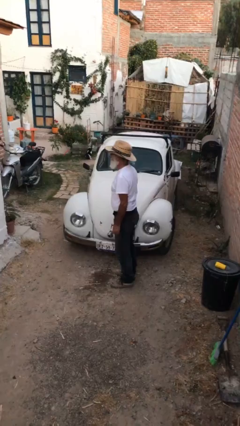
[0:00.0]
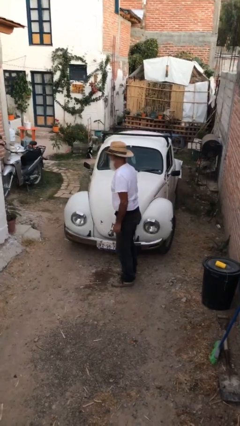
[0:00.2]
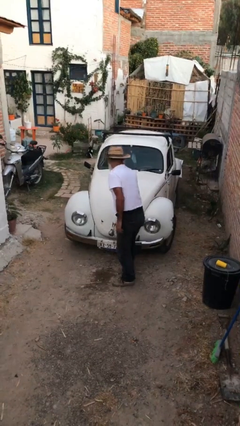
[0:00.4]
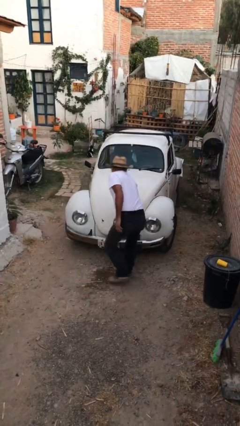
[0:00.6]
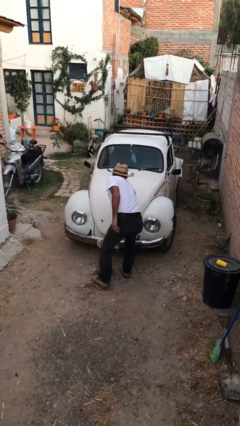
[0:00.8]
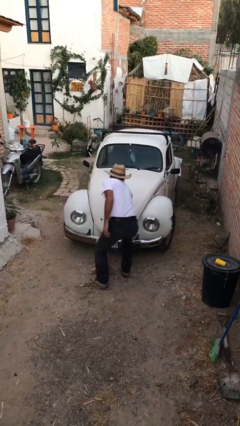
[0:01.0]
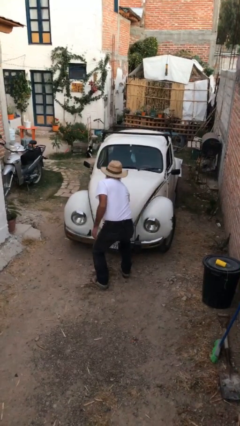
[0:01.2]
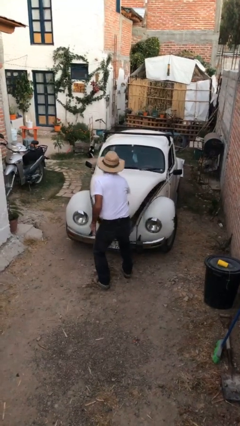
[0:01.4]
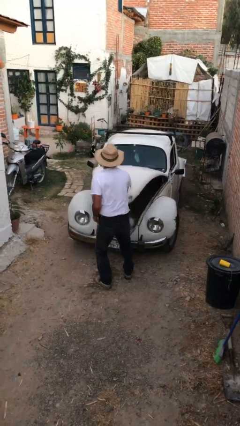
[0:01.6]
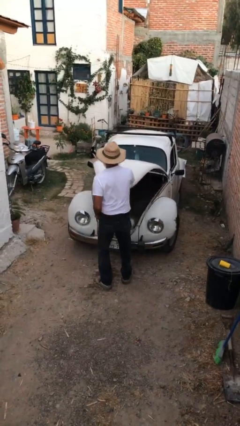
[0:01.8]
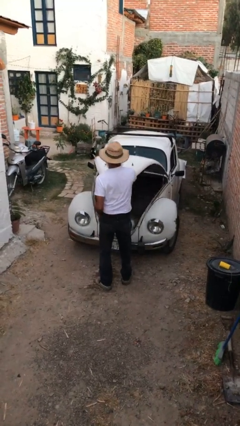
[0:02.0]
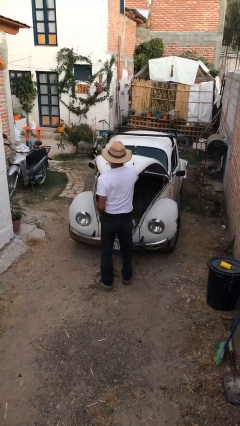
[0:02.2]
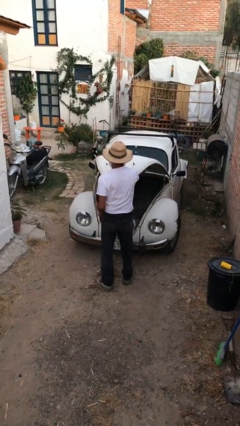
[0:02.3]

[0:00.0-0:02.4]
person opens car trunk

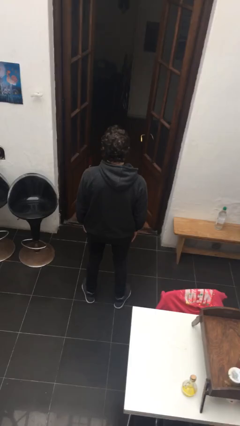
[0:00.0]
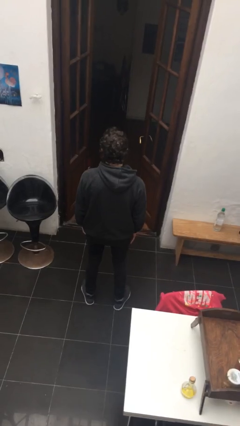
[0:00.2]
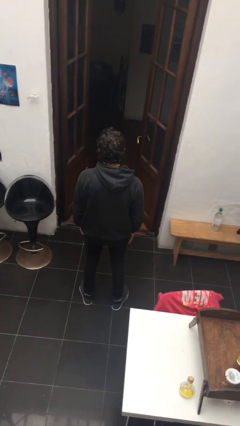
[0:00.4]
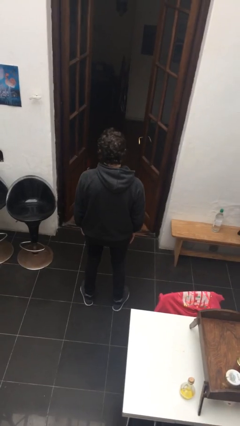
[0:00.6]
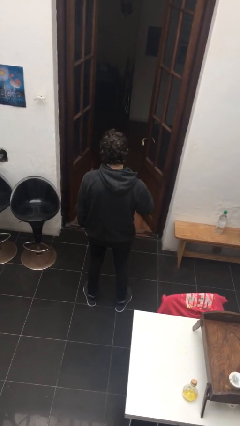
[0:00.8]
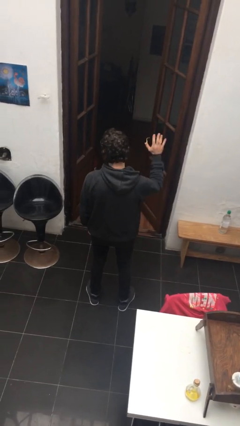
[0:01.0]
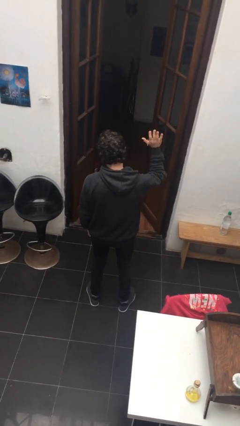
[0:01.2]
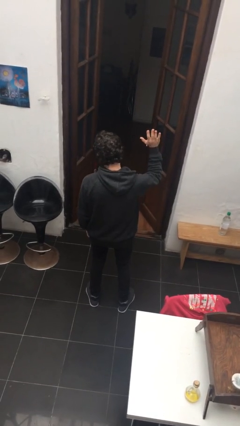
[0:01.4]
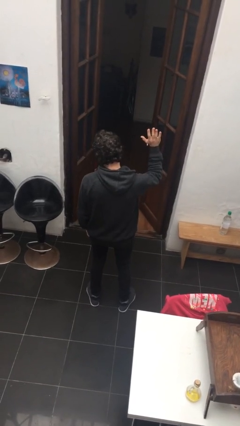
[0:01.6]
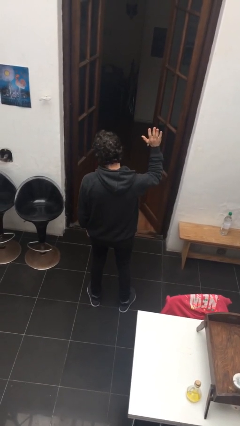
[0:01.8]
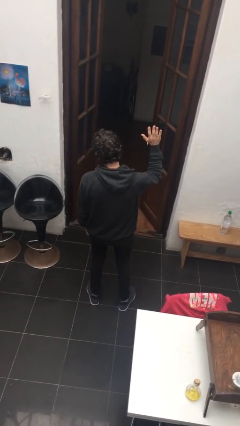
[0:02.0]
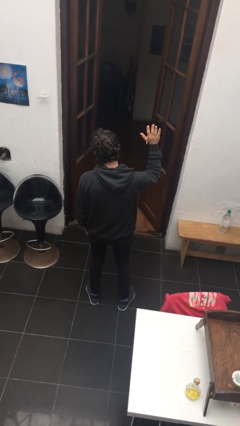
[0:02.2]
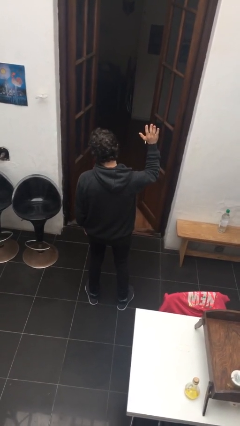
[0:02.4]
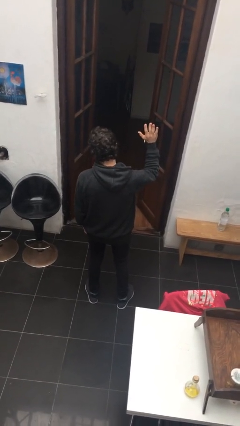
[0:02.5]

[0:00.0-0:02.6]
person gestures raise hand

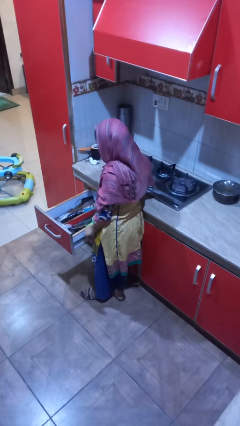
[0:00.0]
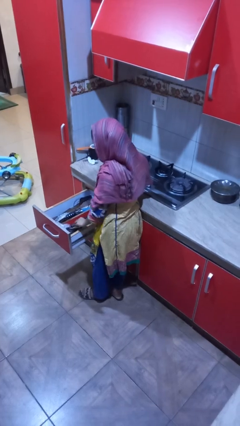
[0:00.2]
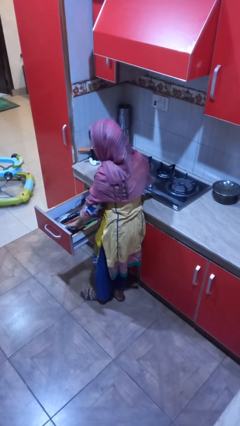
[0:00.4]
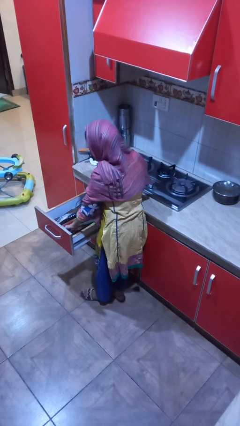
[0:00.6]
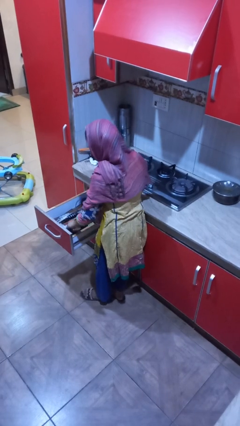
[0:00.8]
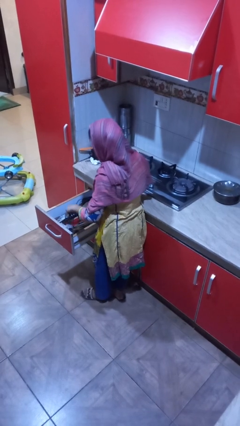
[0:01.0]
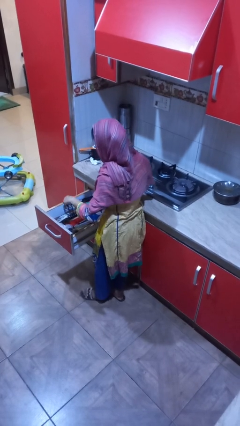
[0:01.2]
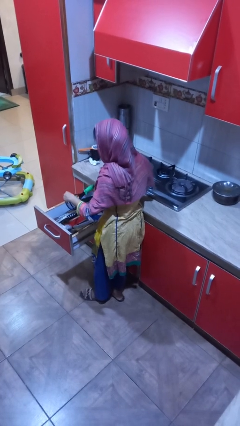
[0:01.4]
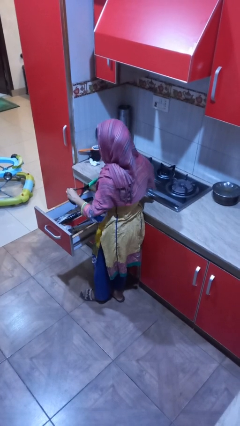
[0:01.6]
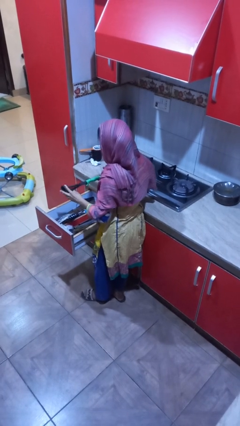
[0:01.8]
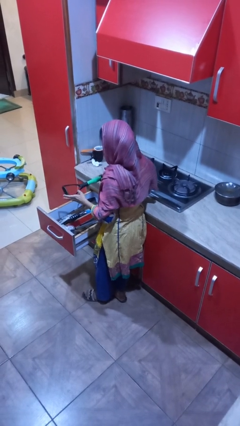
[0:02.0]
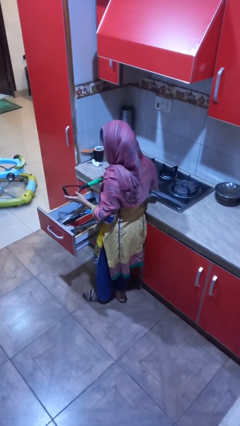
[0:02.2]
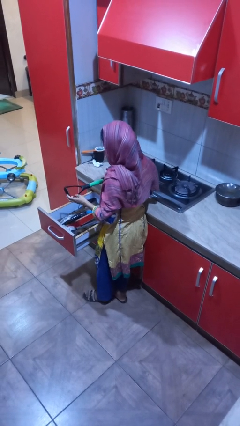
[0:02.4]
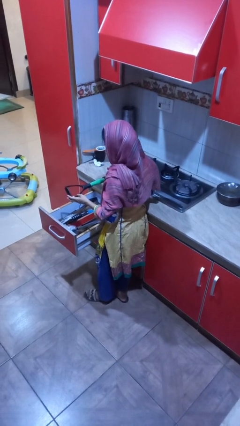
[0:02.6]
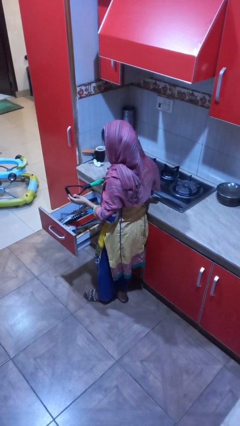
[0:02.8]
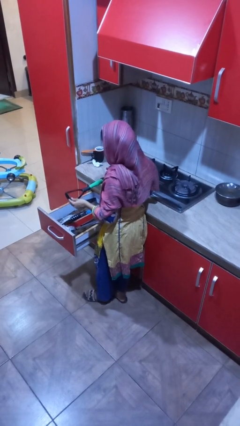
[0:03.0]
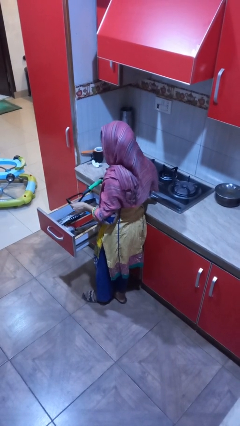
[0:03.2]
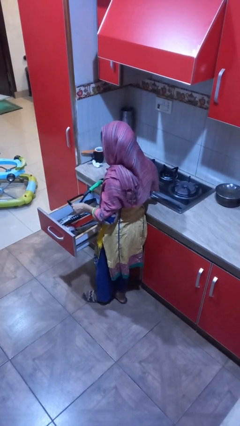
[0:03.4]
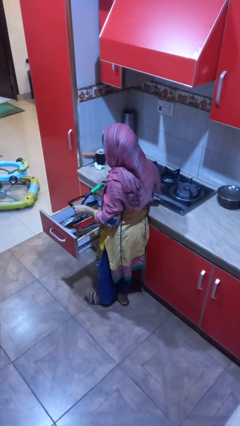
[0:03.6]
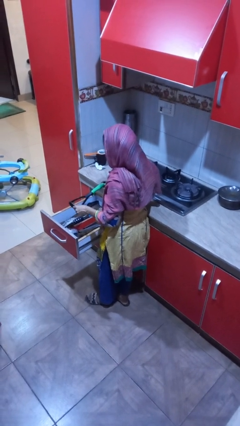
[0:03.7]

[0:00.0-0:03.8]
person takes object from kitchen drawer

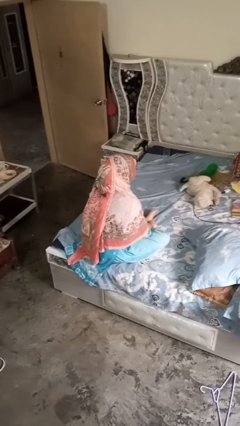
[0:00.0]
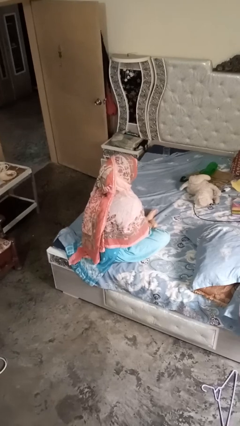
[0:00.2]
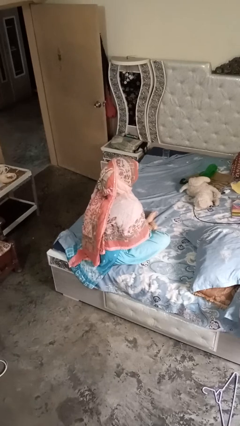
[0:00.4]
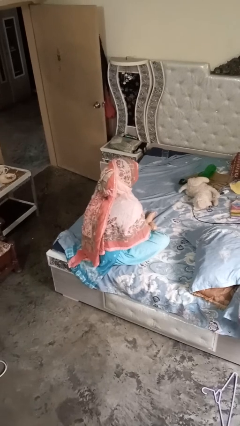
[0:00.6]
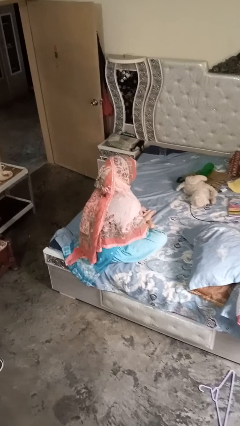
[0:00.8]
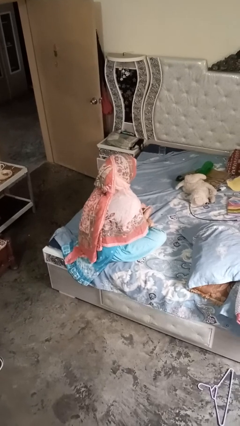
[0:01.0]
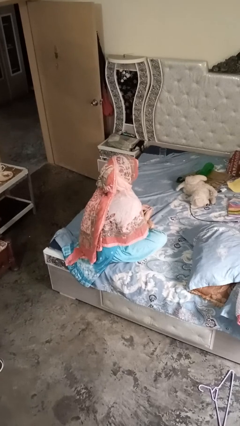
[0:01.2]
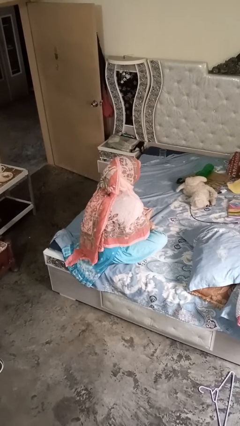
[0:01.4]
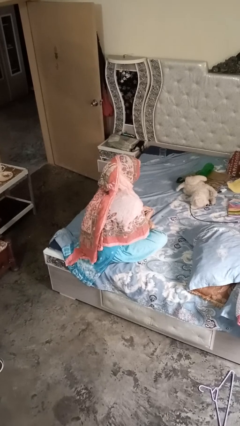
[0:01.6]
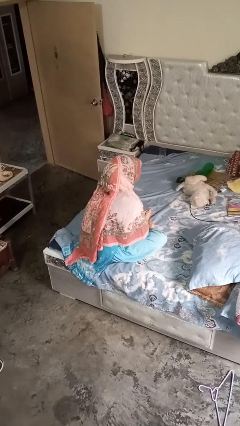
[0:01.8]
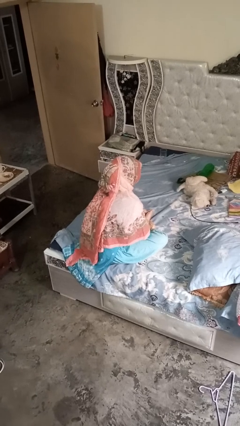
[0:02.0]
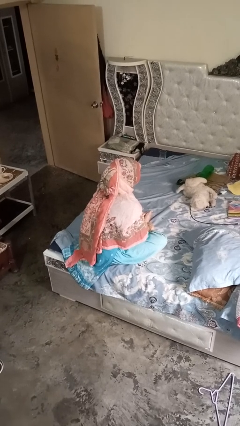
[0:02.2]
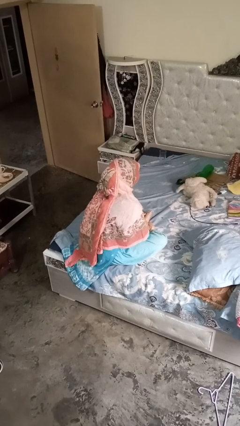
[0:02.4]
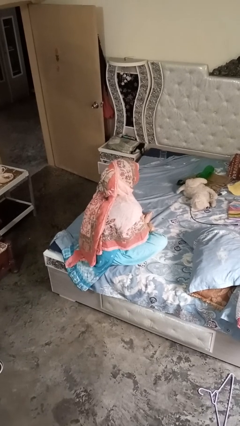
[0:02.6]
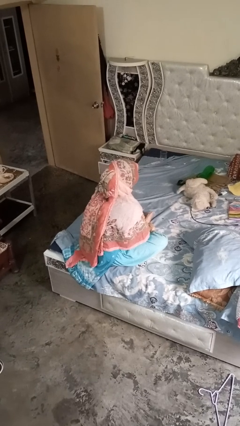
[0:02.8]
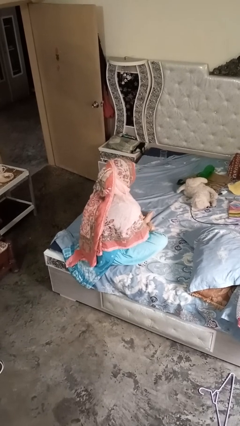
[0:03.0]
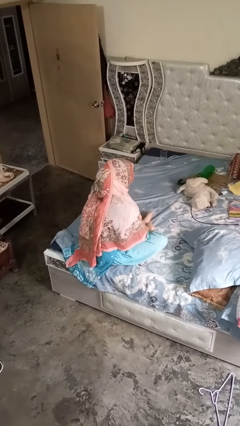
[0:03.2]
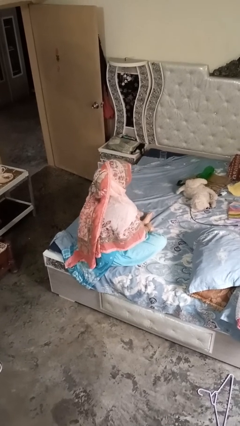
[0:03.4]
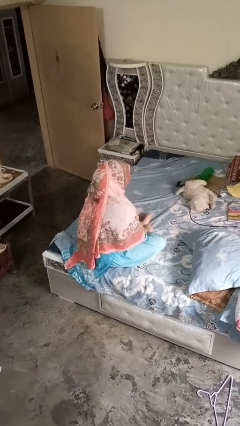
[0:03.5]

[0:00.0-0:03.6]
person rubs foot

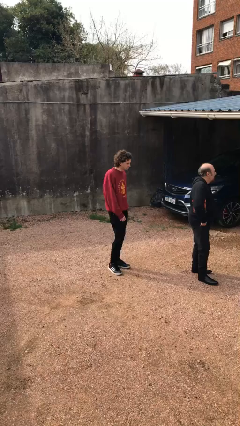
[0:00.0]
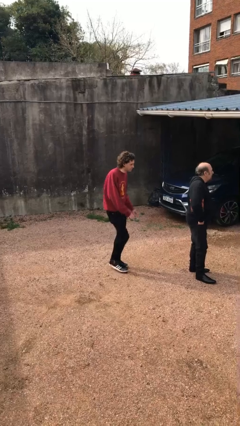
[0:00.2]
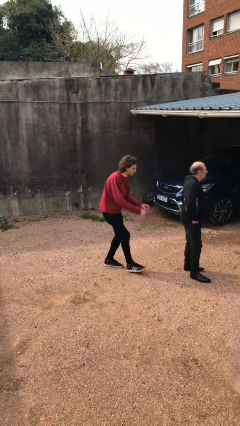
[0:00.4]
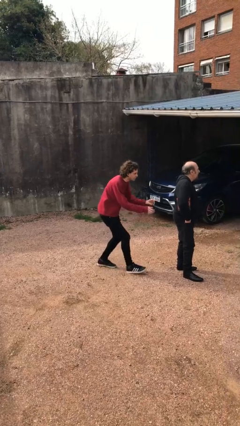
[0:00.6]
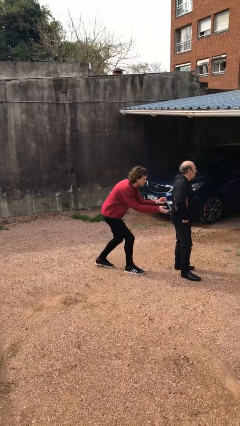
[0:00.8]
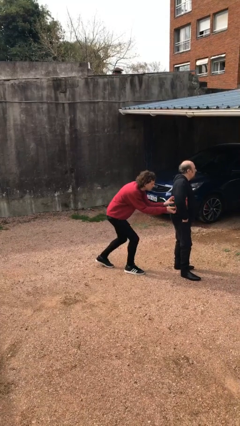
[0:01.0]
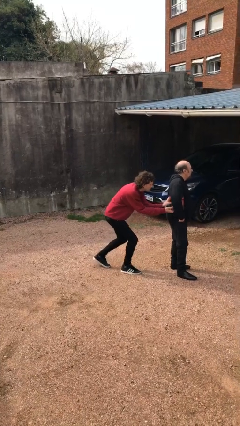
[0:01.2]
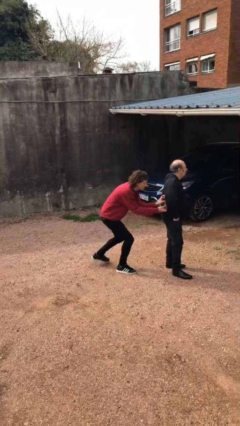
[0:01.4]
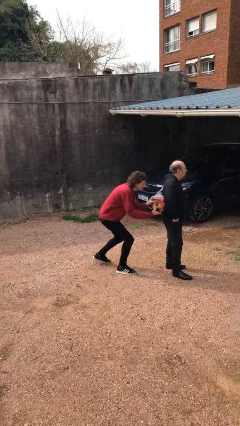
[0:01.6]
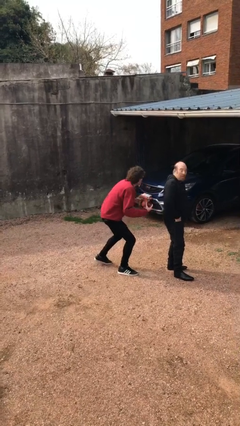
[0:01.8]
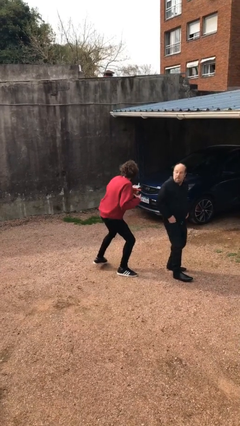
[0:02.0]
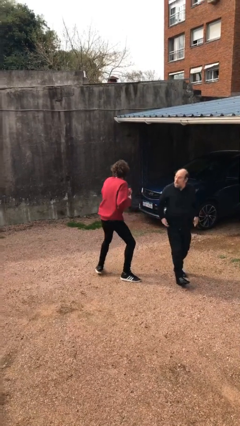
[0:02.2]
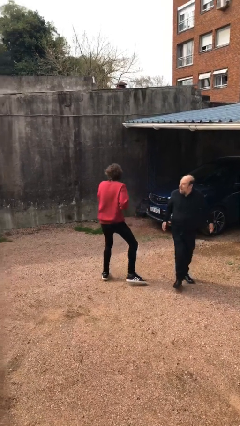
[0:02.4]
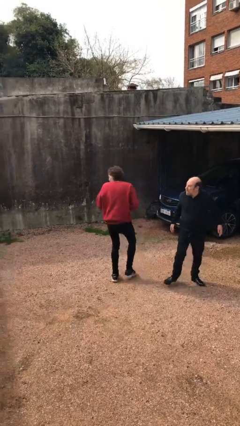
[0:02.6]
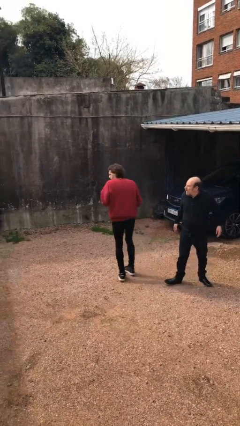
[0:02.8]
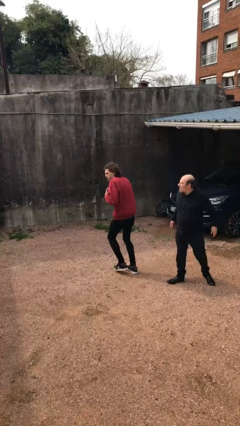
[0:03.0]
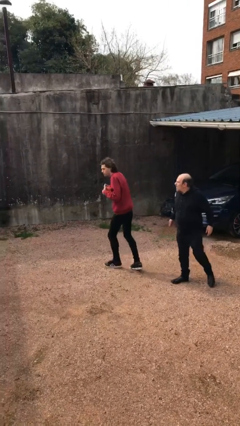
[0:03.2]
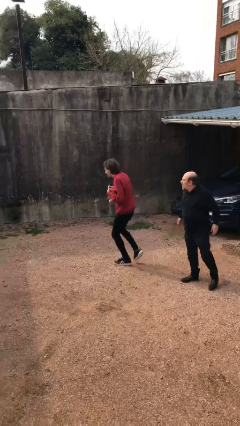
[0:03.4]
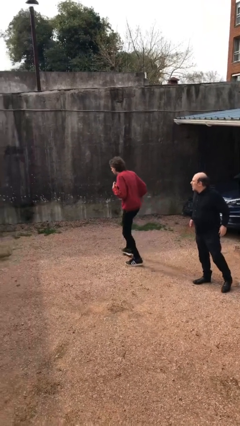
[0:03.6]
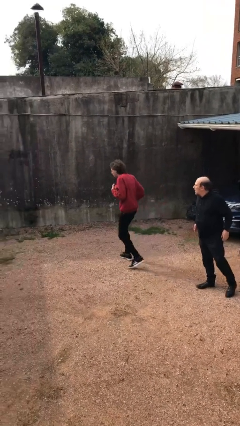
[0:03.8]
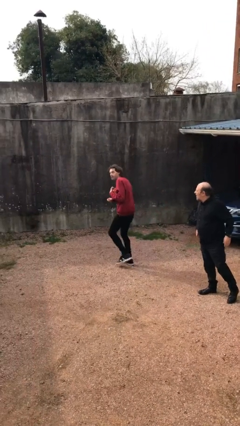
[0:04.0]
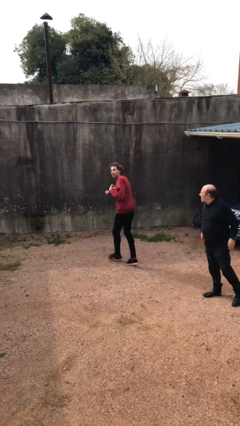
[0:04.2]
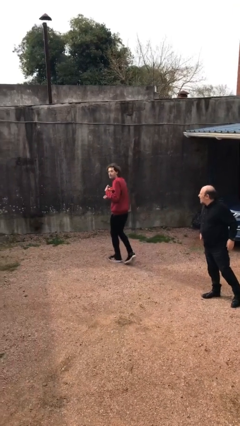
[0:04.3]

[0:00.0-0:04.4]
person steals object from person

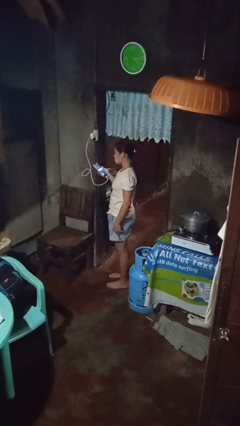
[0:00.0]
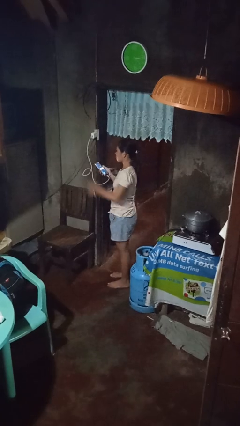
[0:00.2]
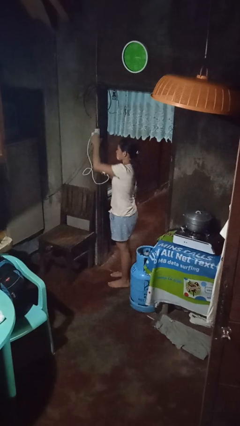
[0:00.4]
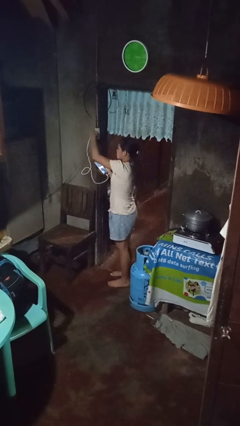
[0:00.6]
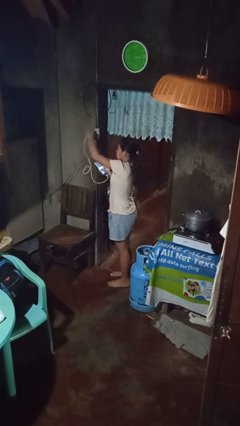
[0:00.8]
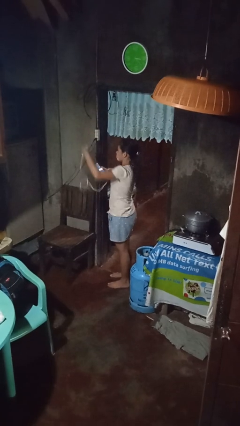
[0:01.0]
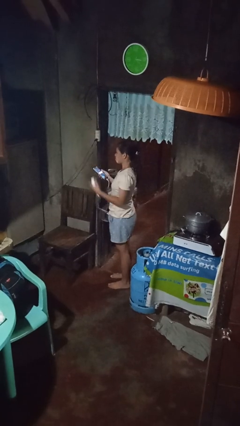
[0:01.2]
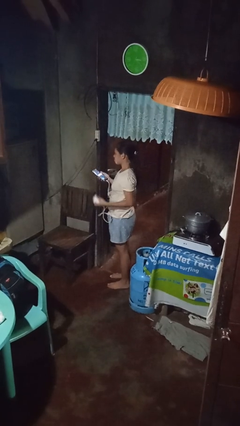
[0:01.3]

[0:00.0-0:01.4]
person unplugs from electrical socket
